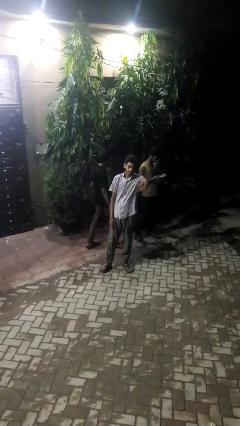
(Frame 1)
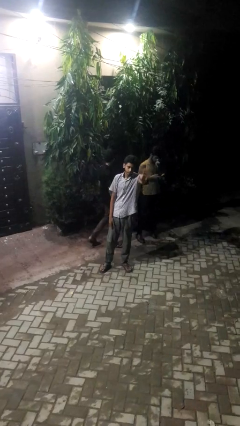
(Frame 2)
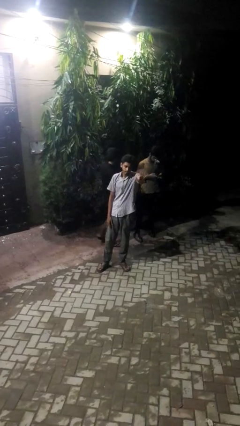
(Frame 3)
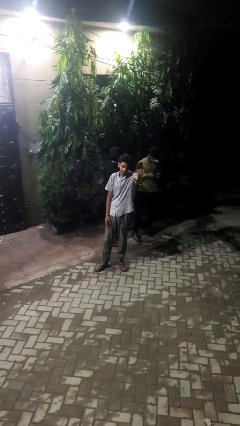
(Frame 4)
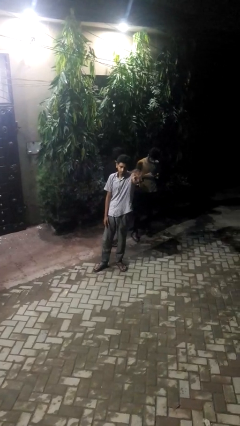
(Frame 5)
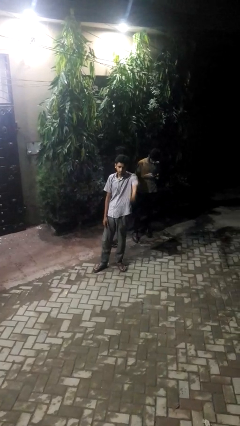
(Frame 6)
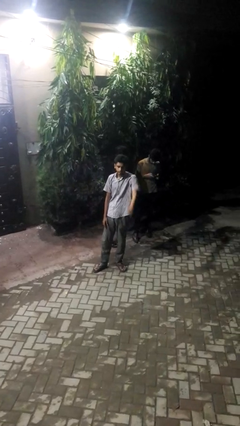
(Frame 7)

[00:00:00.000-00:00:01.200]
person waves at person

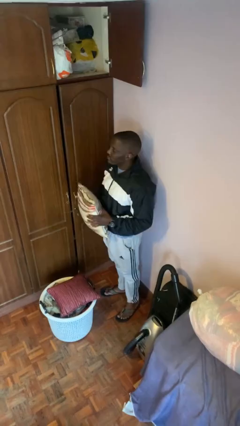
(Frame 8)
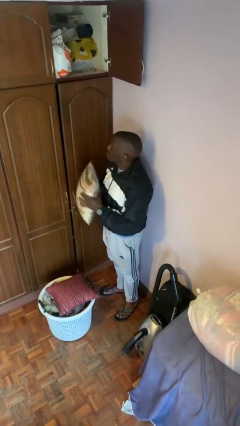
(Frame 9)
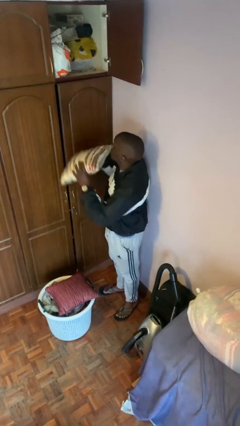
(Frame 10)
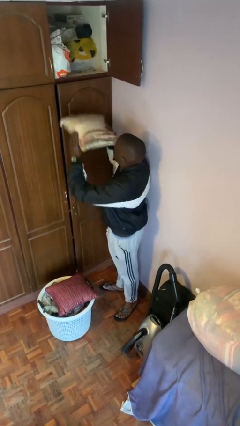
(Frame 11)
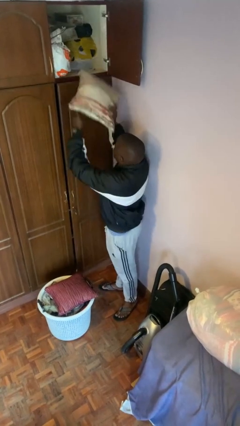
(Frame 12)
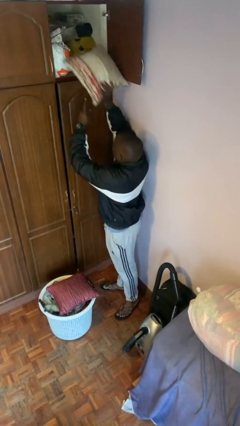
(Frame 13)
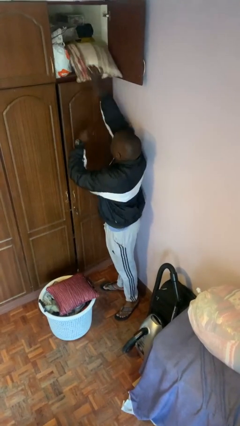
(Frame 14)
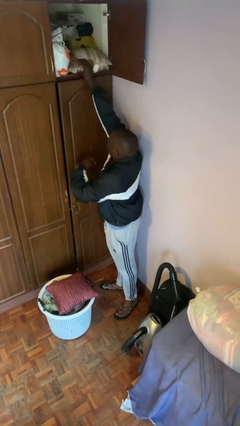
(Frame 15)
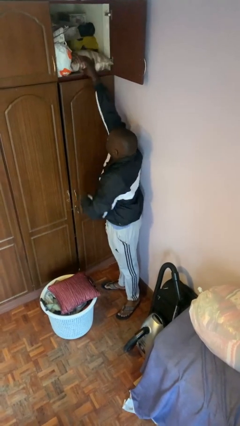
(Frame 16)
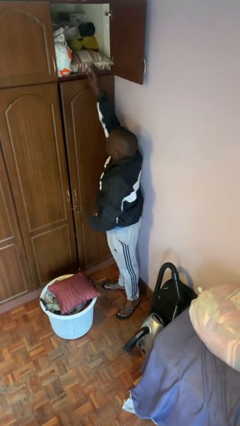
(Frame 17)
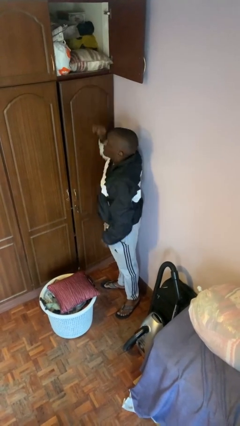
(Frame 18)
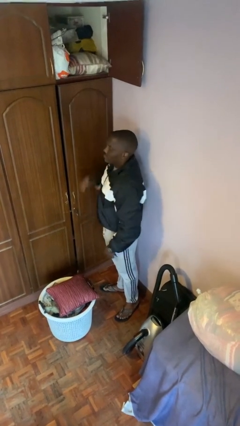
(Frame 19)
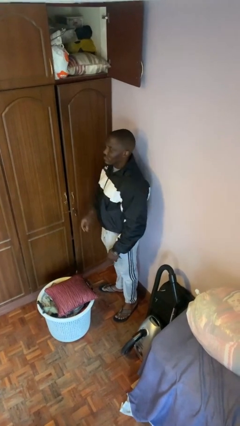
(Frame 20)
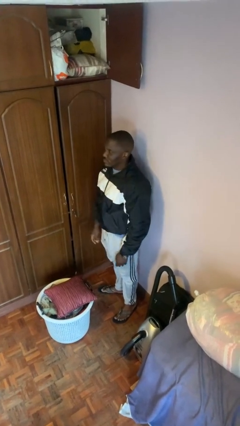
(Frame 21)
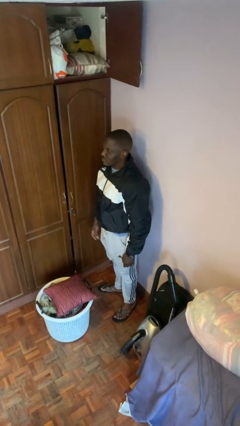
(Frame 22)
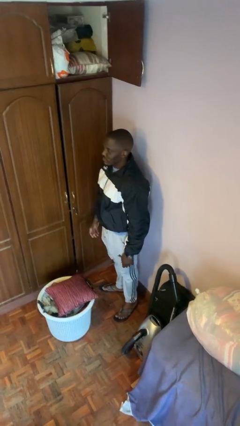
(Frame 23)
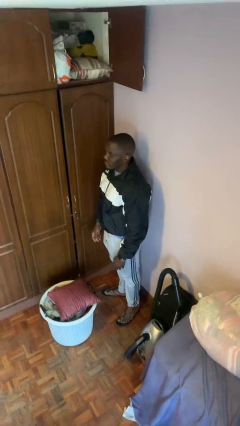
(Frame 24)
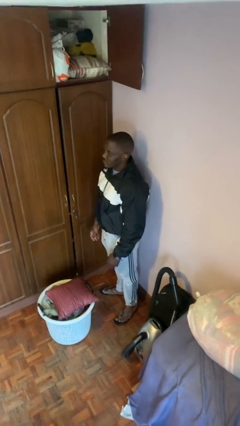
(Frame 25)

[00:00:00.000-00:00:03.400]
person puts down object on shelf

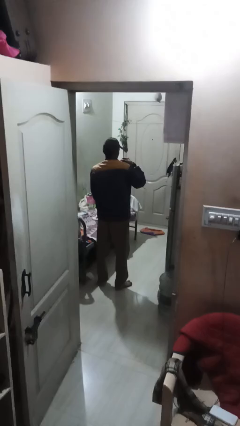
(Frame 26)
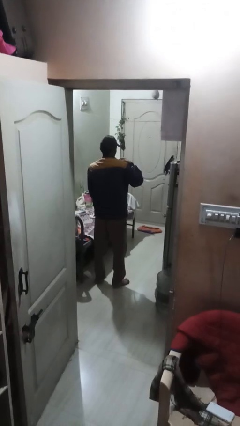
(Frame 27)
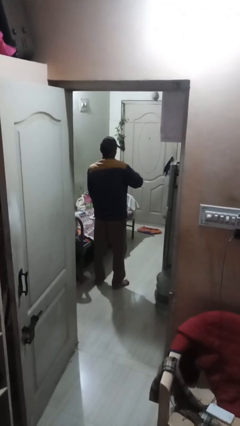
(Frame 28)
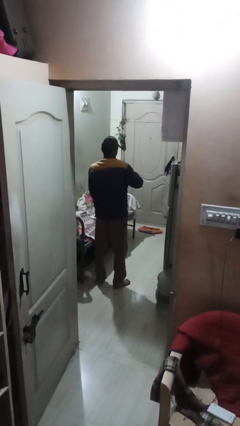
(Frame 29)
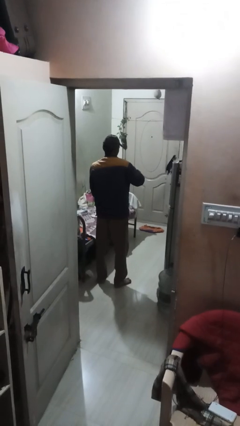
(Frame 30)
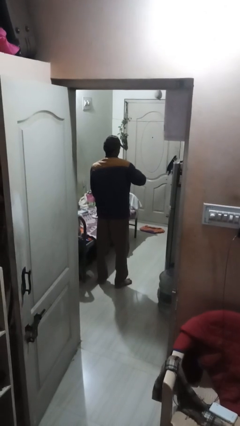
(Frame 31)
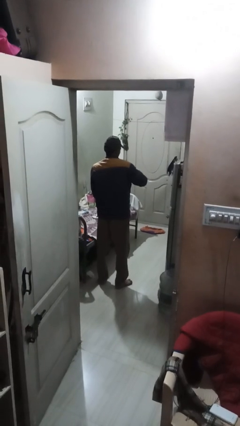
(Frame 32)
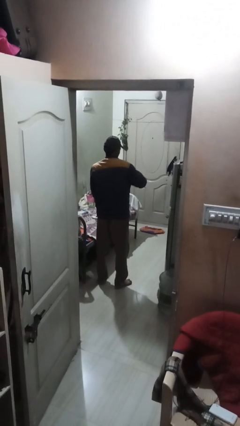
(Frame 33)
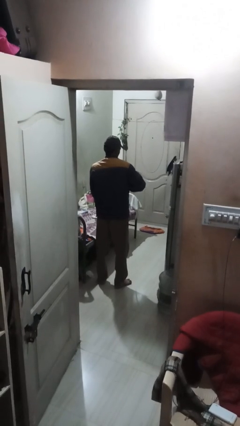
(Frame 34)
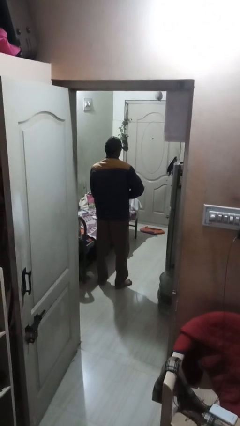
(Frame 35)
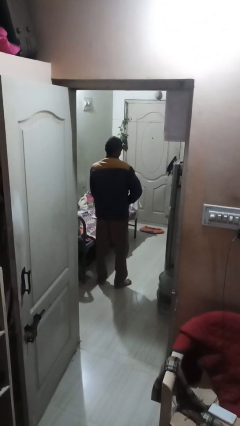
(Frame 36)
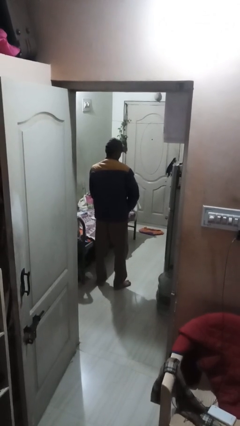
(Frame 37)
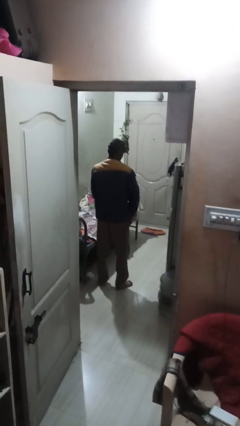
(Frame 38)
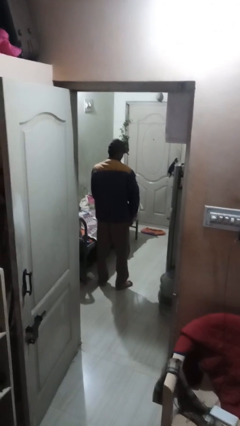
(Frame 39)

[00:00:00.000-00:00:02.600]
person unzips jacket

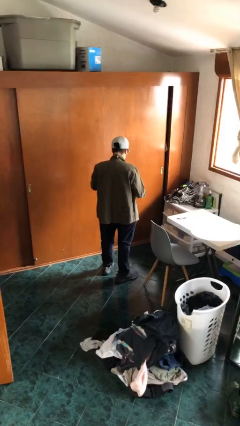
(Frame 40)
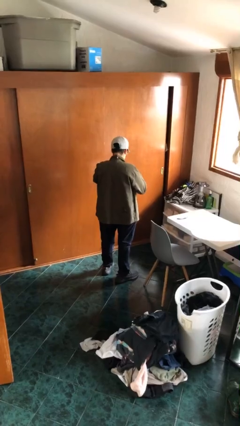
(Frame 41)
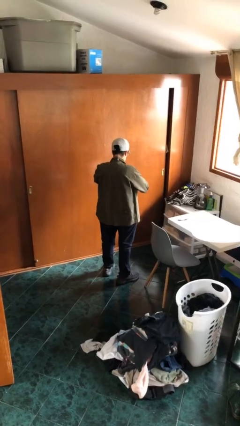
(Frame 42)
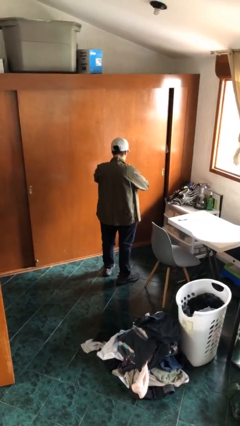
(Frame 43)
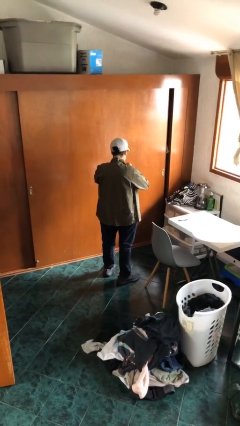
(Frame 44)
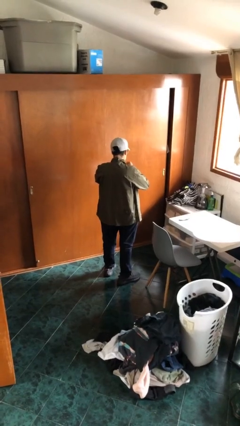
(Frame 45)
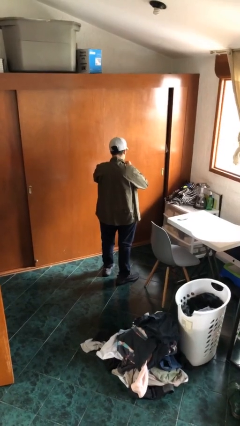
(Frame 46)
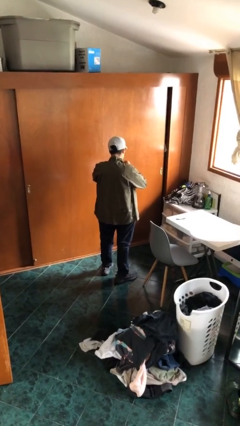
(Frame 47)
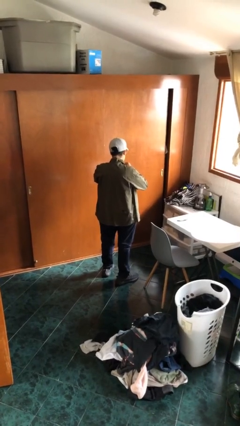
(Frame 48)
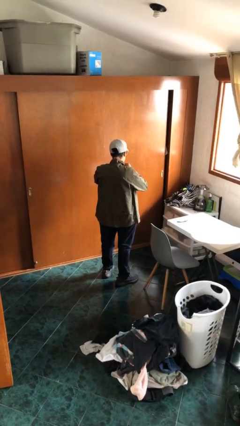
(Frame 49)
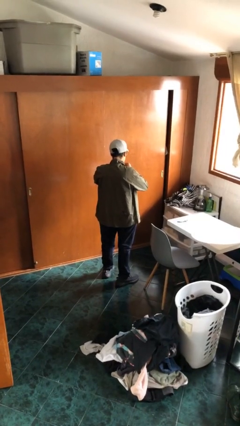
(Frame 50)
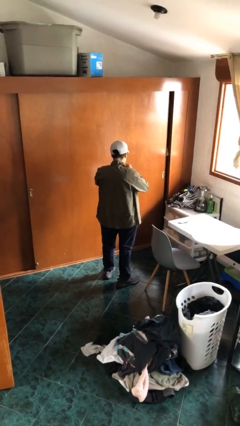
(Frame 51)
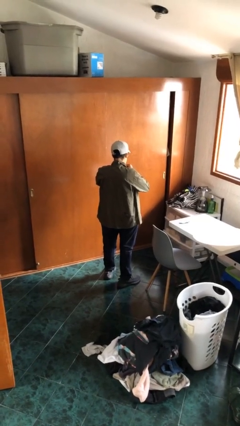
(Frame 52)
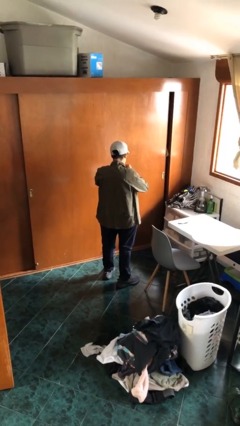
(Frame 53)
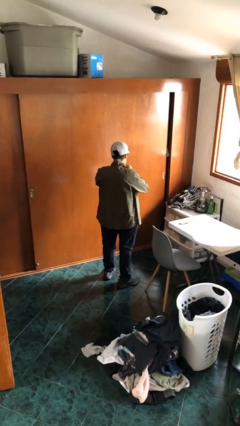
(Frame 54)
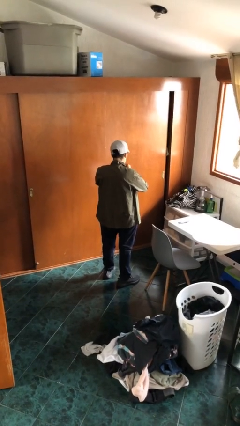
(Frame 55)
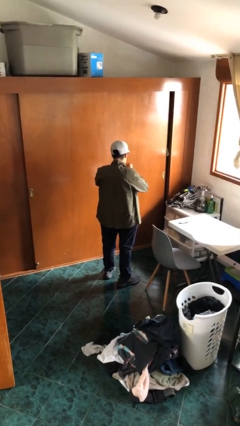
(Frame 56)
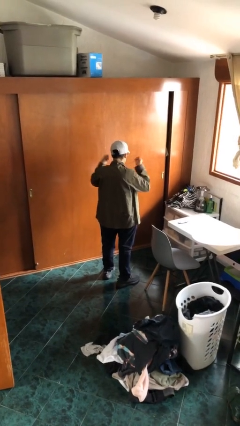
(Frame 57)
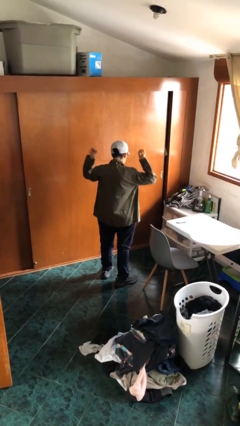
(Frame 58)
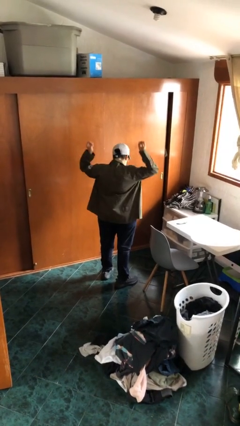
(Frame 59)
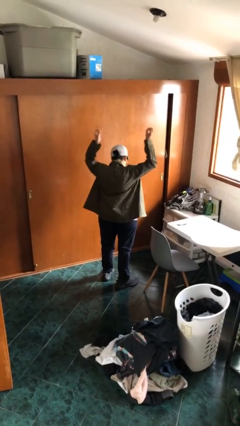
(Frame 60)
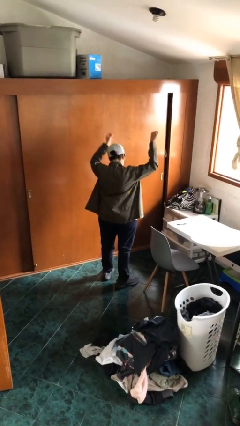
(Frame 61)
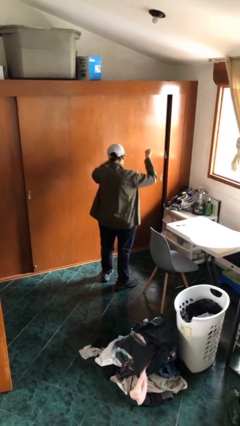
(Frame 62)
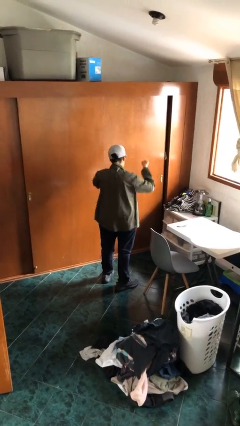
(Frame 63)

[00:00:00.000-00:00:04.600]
person takes off necklace

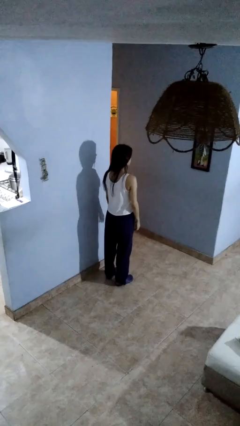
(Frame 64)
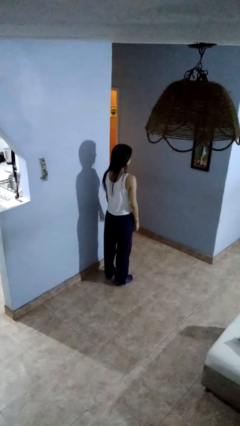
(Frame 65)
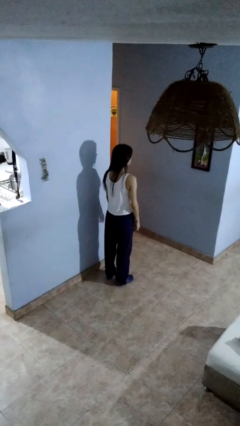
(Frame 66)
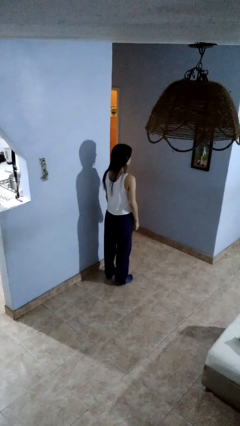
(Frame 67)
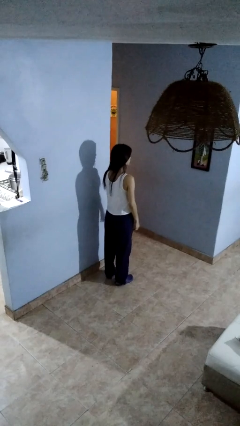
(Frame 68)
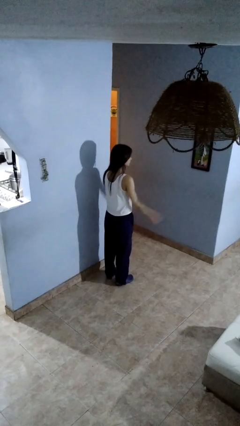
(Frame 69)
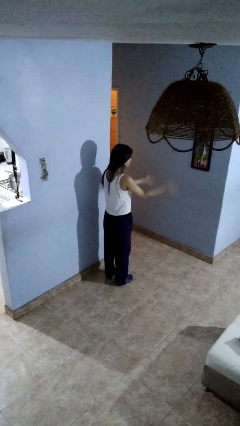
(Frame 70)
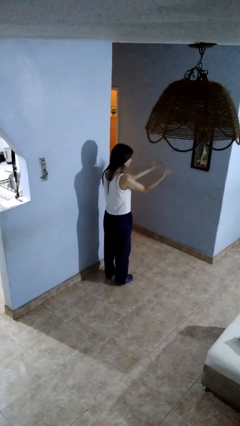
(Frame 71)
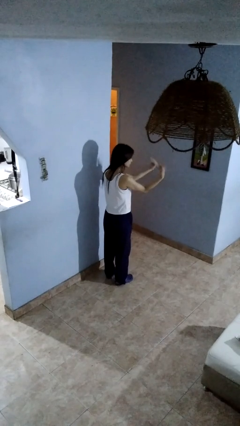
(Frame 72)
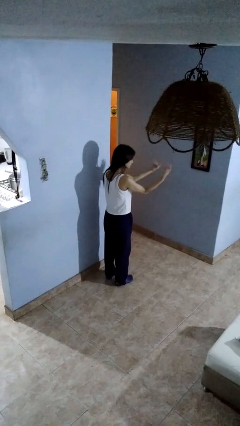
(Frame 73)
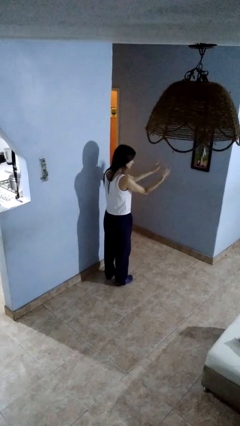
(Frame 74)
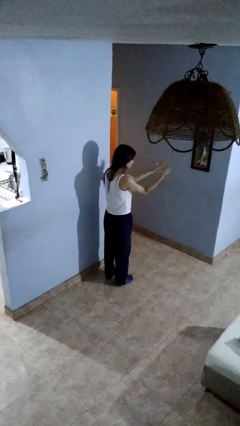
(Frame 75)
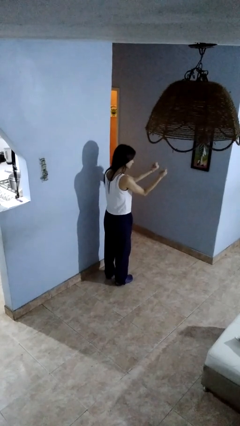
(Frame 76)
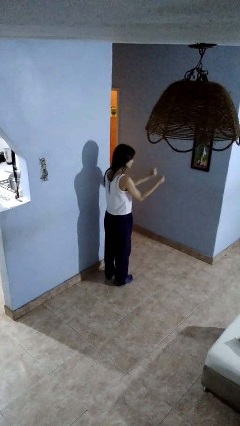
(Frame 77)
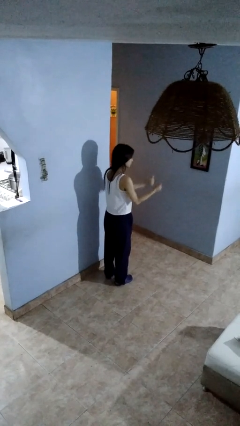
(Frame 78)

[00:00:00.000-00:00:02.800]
person gestures come here

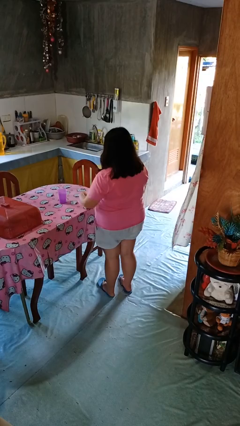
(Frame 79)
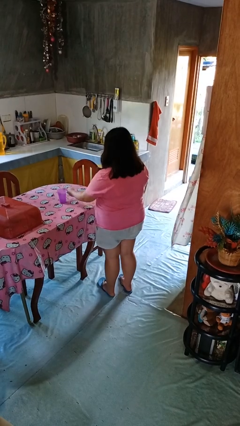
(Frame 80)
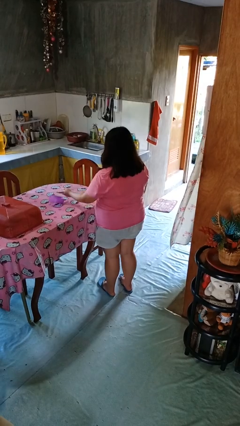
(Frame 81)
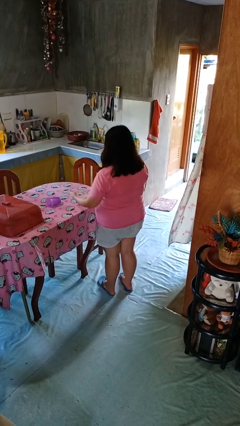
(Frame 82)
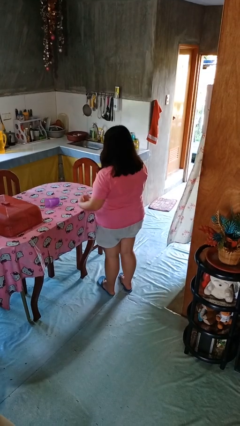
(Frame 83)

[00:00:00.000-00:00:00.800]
person knocks over glass

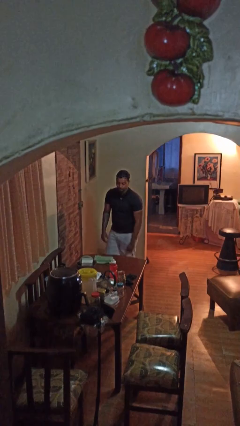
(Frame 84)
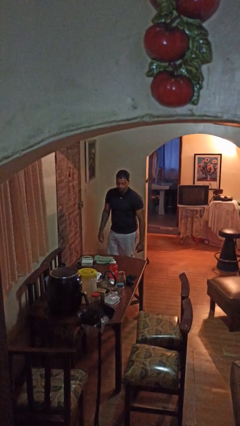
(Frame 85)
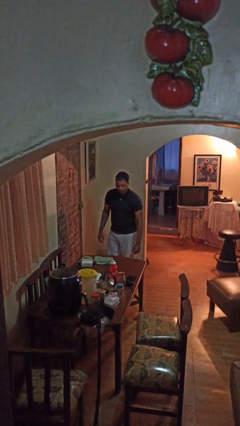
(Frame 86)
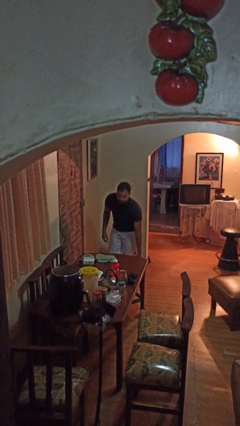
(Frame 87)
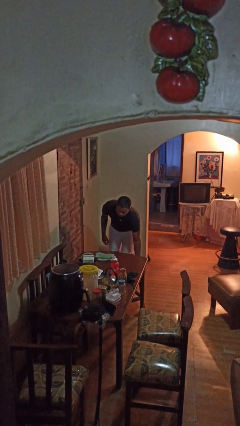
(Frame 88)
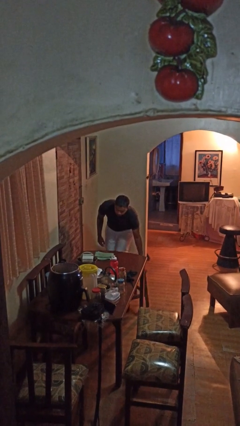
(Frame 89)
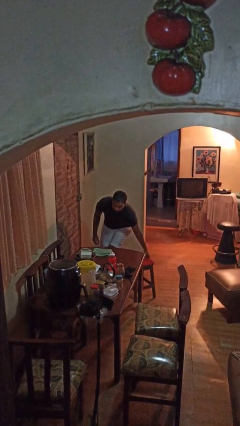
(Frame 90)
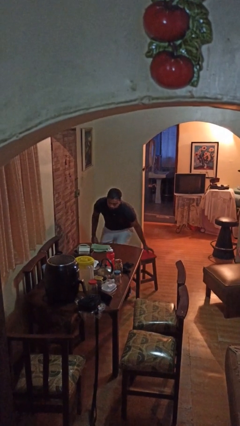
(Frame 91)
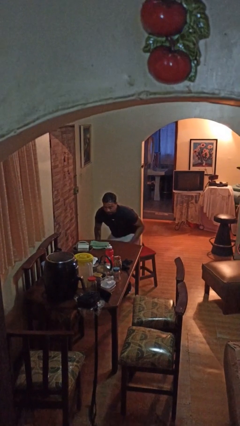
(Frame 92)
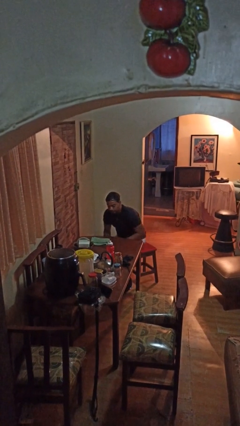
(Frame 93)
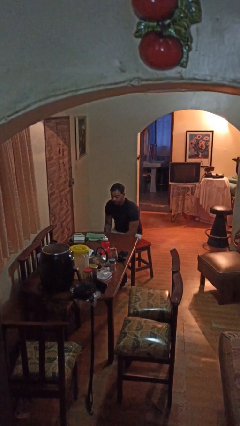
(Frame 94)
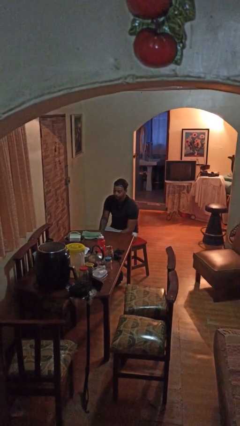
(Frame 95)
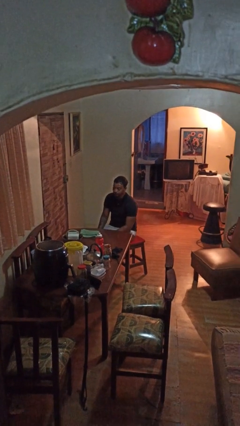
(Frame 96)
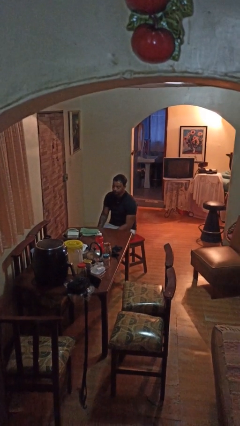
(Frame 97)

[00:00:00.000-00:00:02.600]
person sits down
